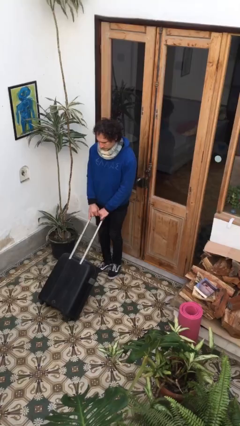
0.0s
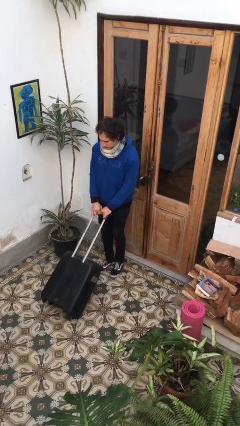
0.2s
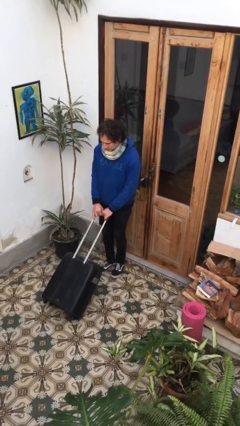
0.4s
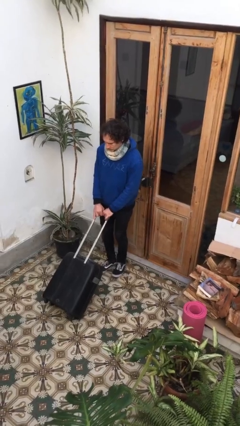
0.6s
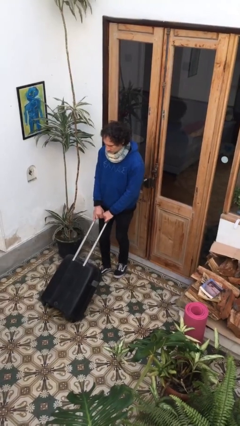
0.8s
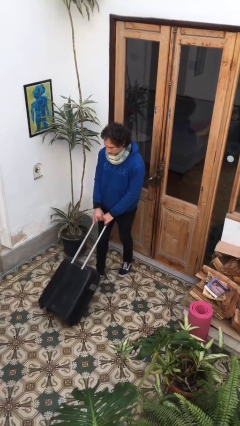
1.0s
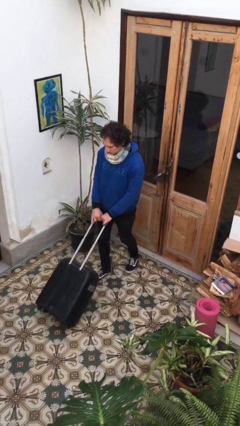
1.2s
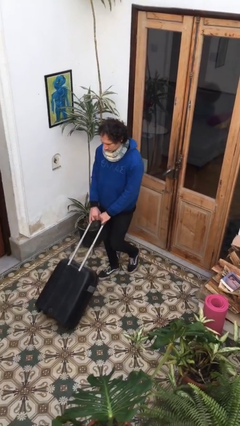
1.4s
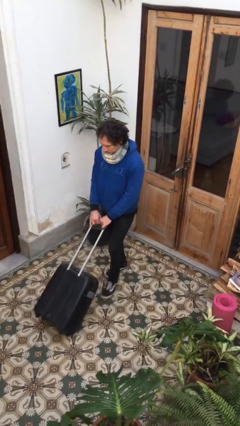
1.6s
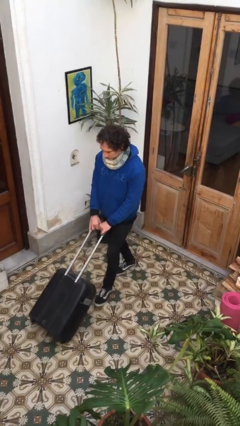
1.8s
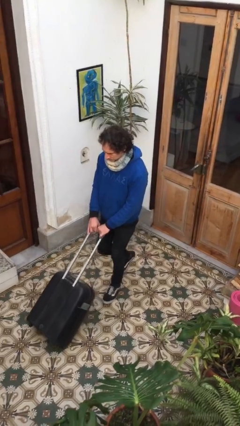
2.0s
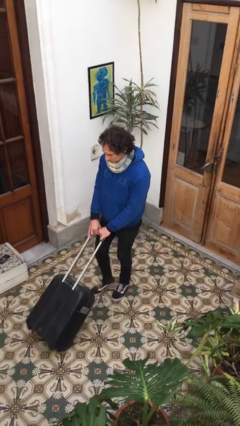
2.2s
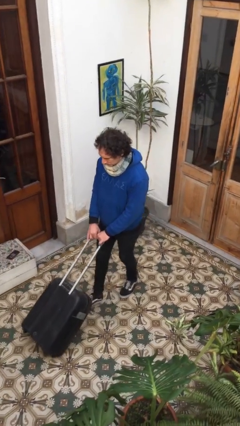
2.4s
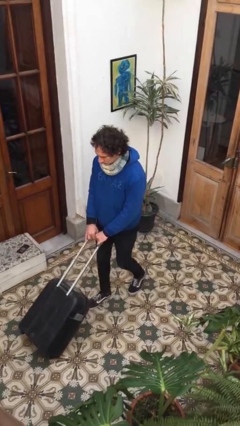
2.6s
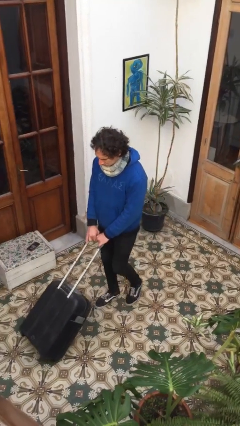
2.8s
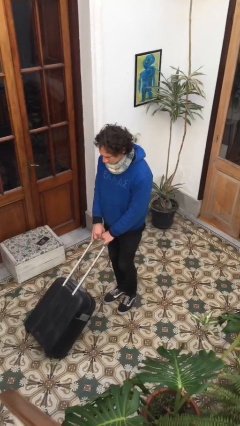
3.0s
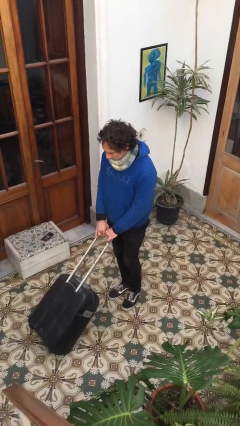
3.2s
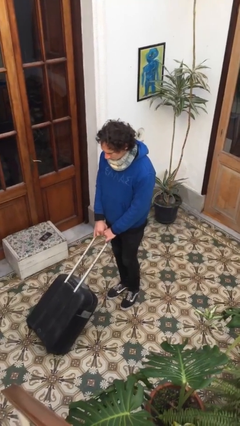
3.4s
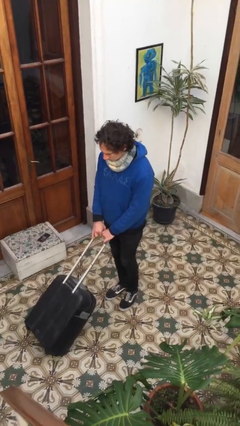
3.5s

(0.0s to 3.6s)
person pushes wheeled cart

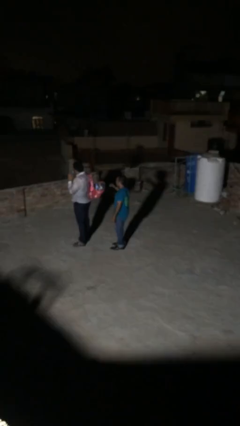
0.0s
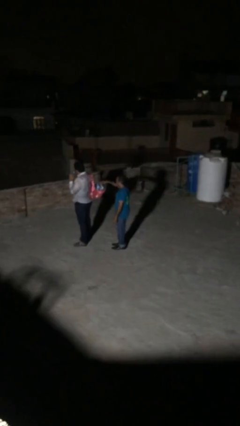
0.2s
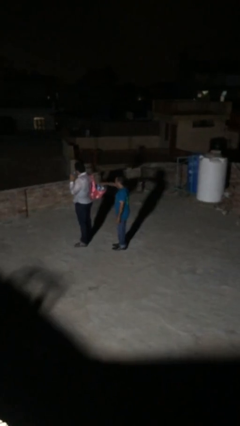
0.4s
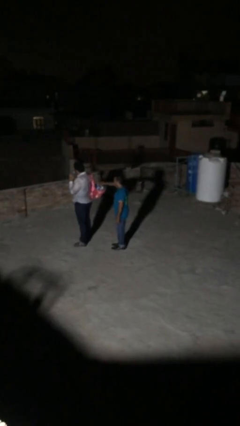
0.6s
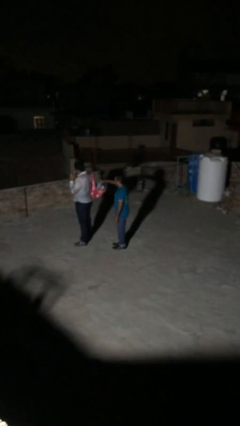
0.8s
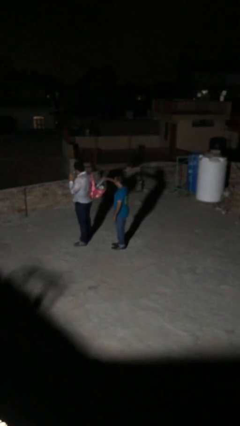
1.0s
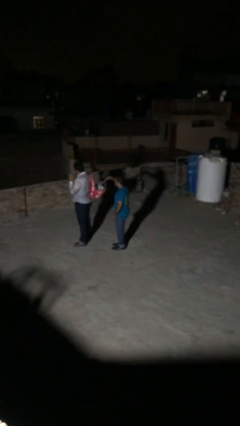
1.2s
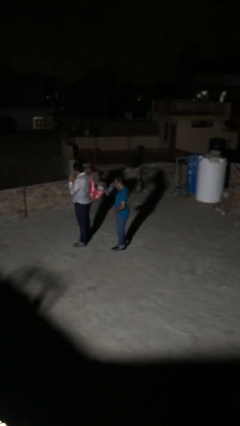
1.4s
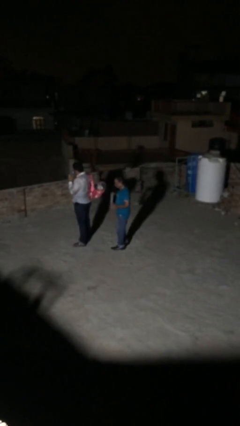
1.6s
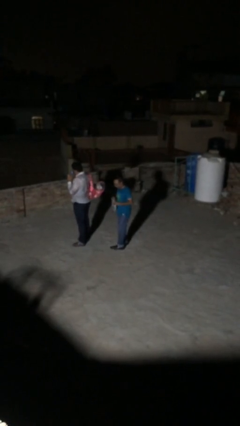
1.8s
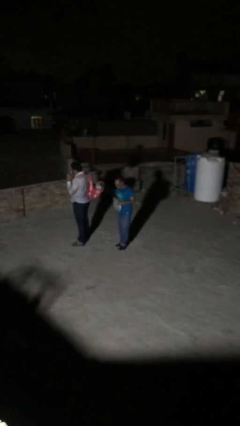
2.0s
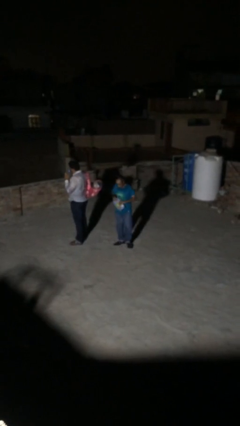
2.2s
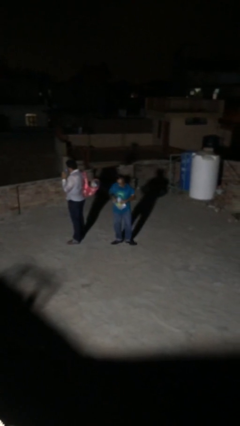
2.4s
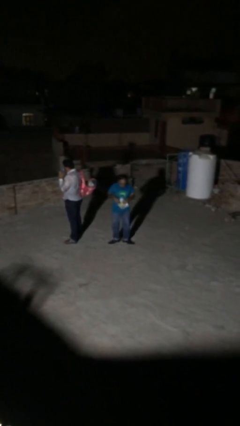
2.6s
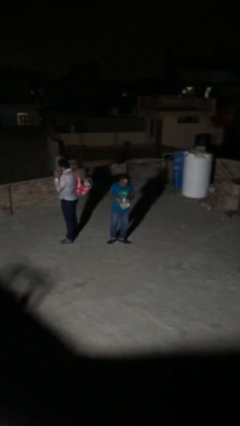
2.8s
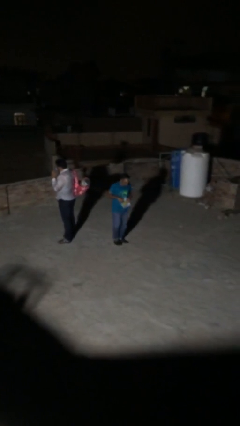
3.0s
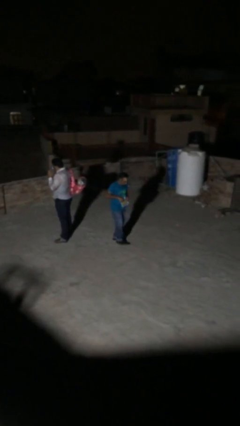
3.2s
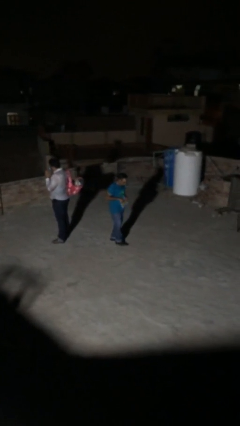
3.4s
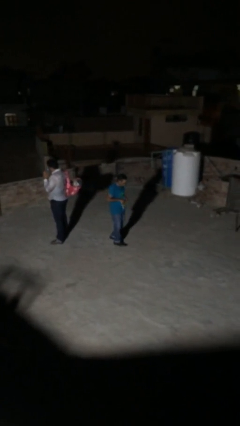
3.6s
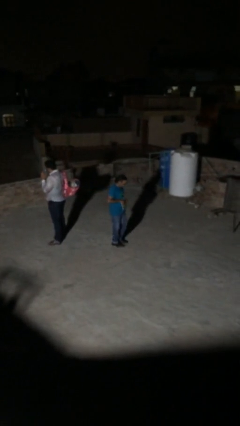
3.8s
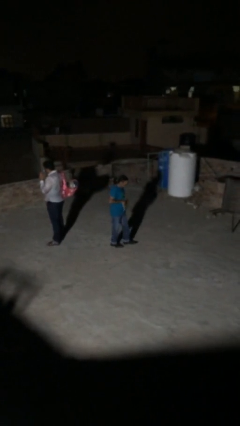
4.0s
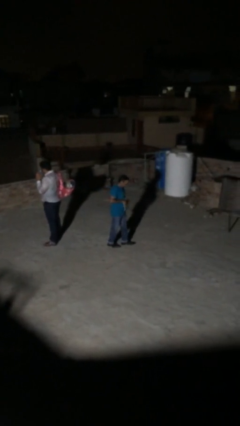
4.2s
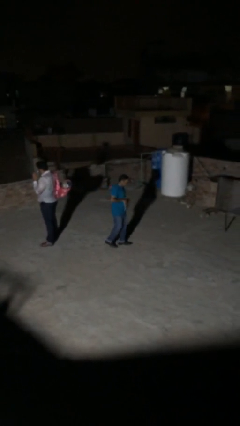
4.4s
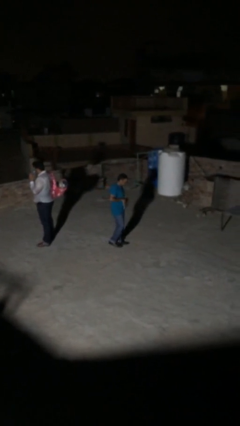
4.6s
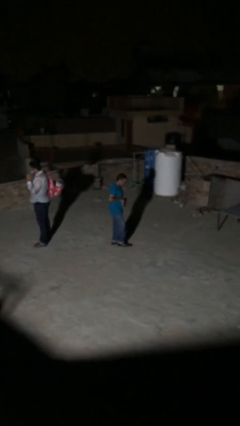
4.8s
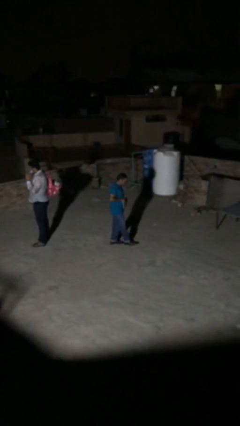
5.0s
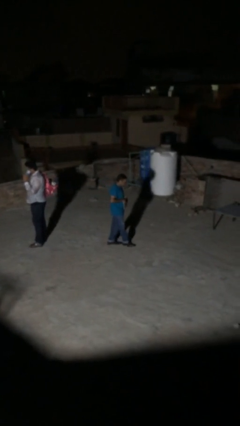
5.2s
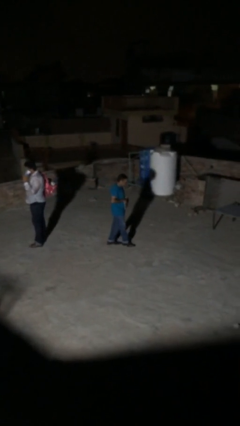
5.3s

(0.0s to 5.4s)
person steals object from person

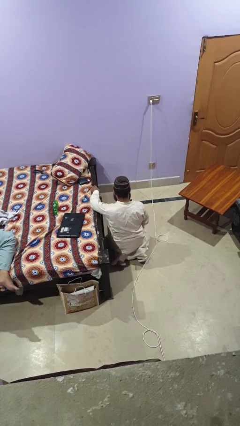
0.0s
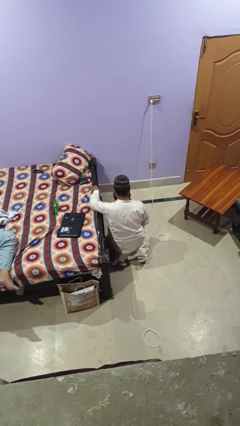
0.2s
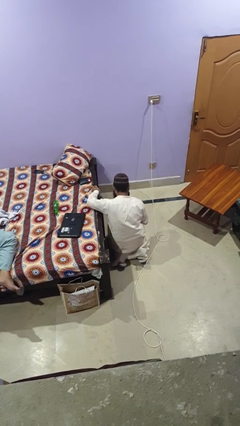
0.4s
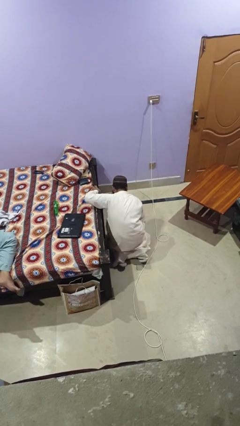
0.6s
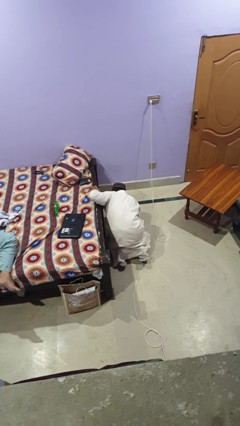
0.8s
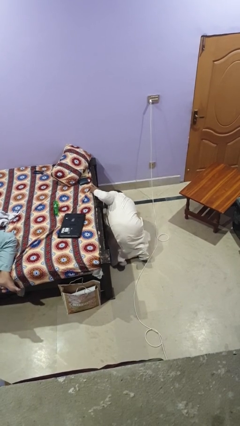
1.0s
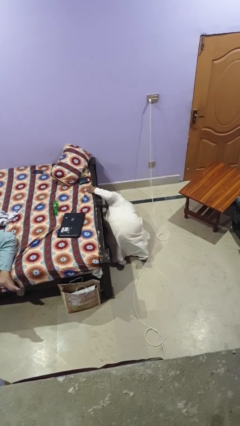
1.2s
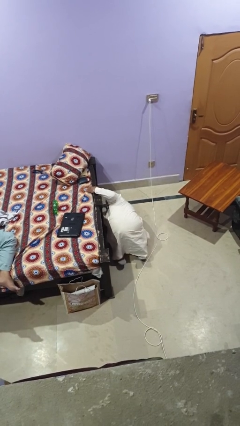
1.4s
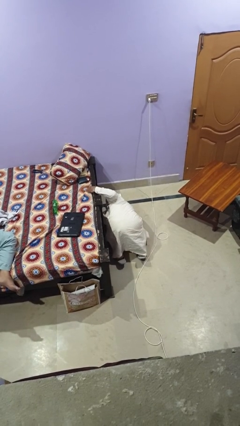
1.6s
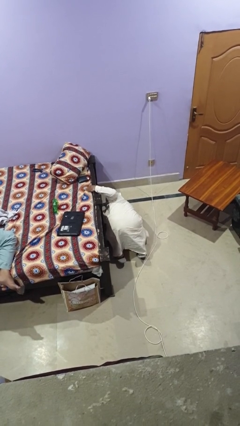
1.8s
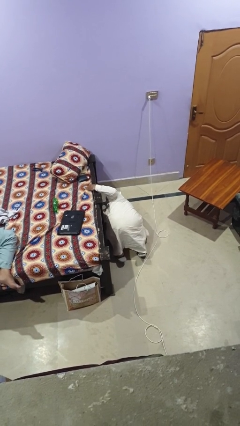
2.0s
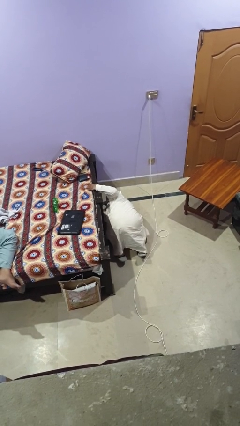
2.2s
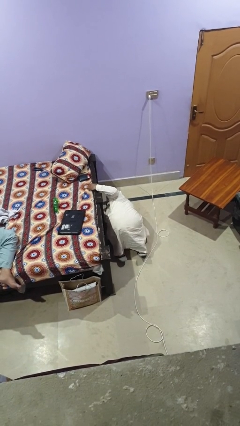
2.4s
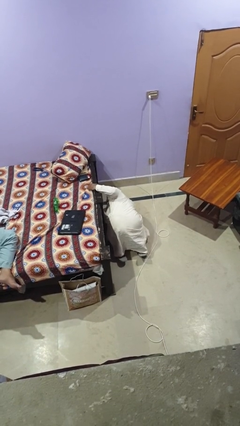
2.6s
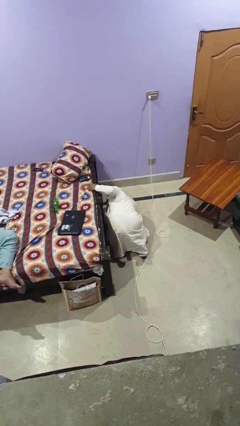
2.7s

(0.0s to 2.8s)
person searches under bed

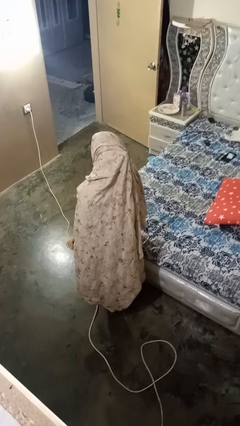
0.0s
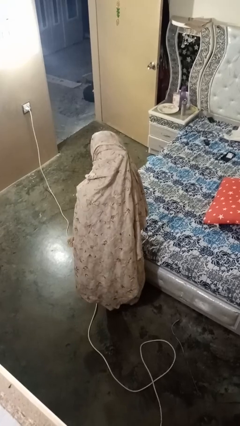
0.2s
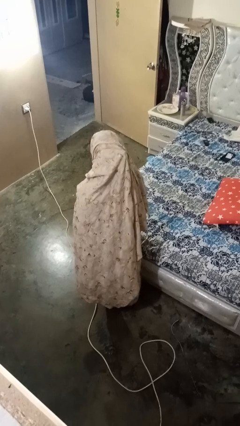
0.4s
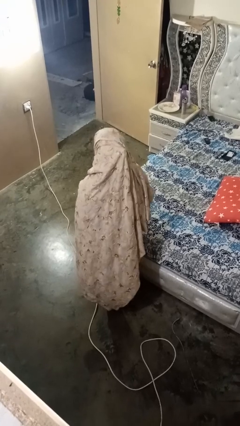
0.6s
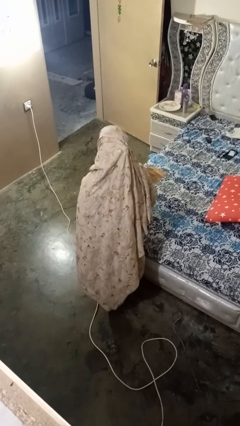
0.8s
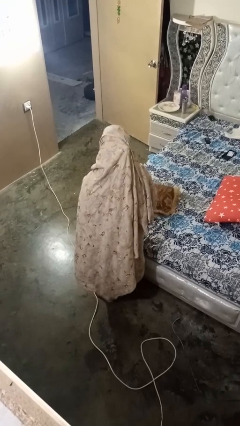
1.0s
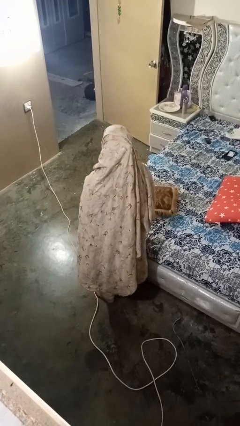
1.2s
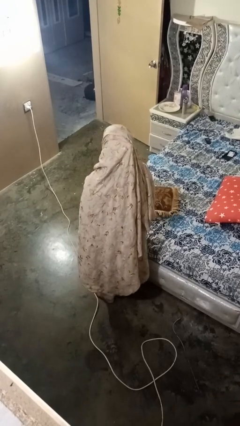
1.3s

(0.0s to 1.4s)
person puts down object on bed

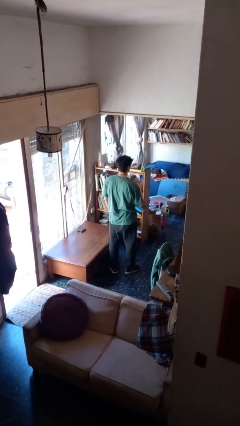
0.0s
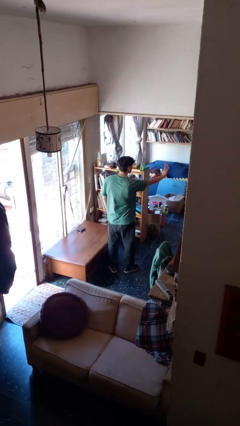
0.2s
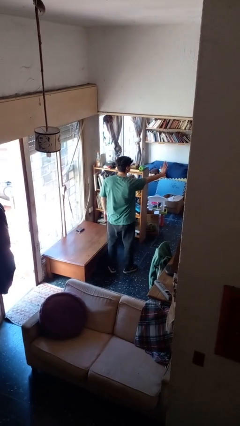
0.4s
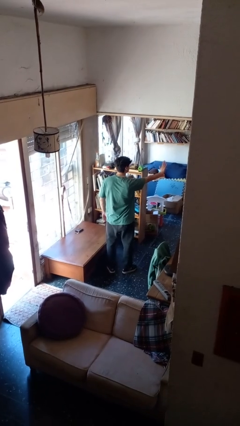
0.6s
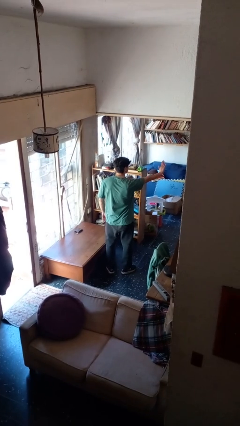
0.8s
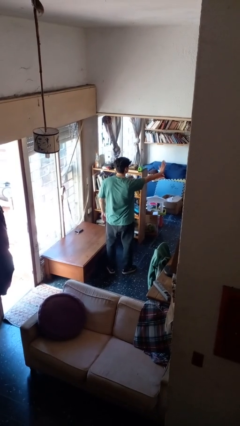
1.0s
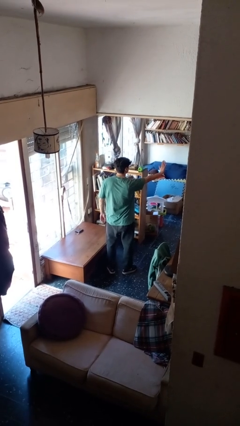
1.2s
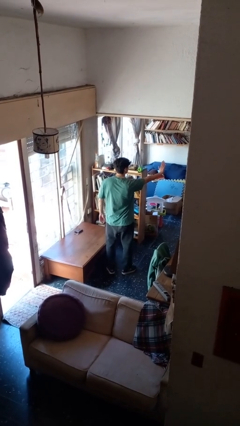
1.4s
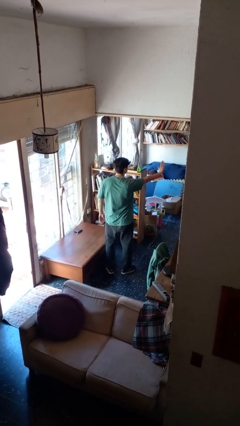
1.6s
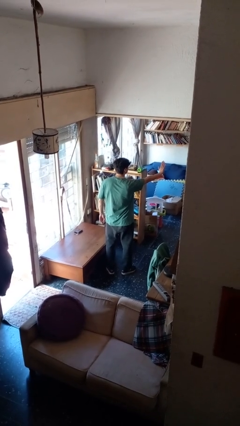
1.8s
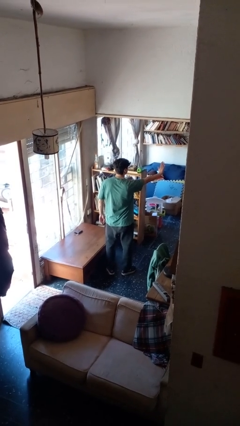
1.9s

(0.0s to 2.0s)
person gestures stop

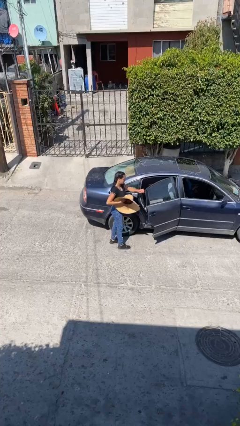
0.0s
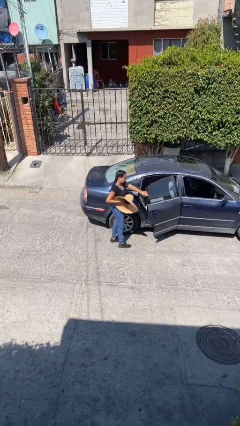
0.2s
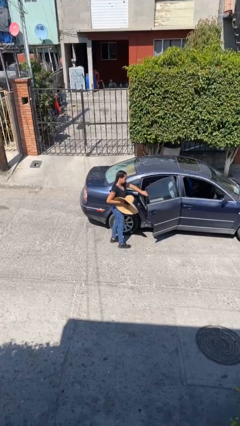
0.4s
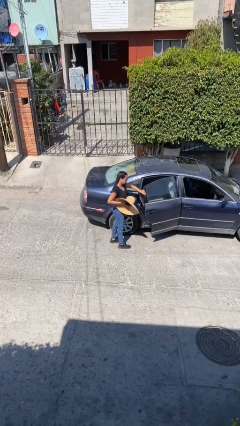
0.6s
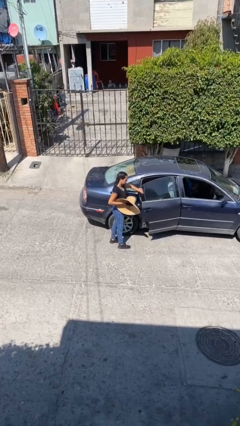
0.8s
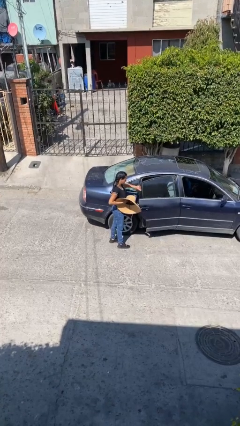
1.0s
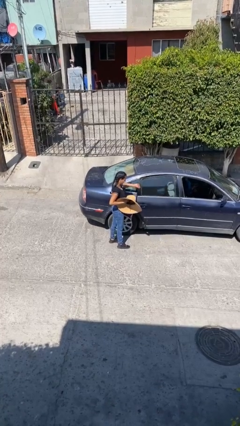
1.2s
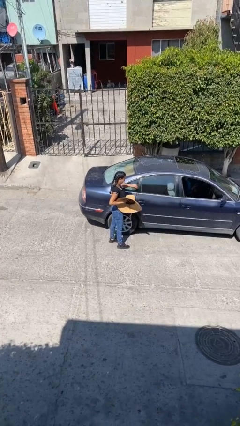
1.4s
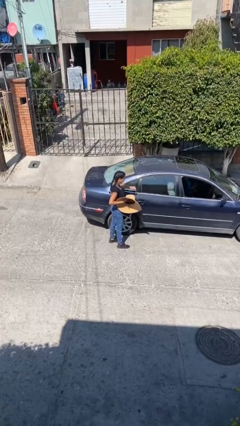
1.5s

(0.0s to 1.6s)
person closes car door

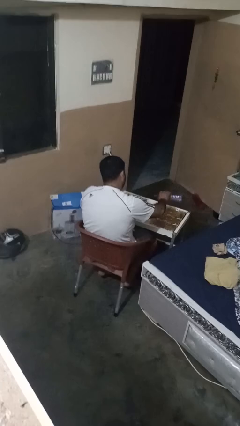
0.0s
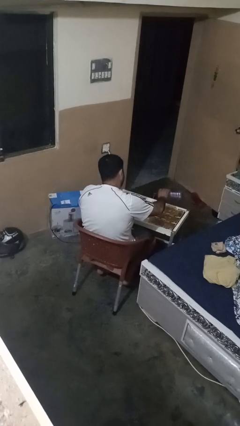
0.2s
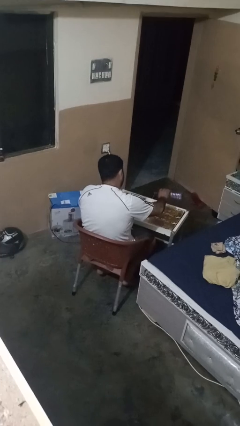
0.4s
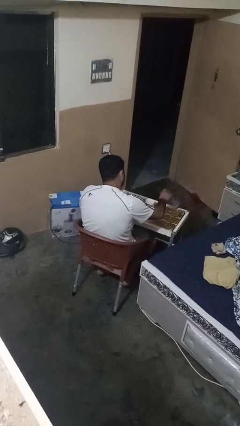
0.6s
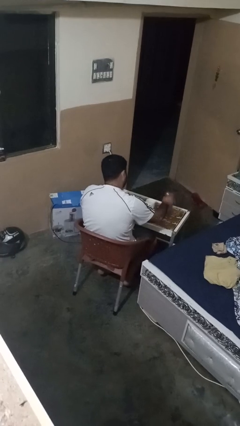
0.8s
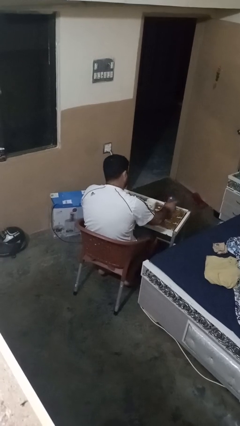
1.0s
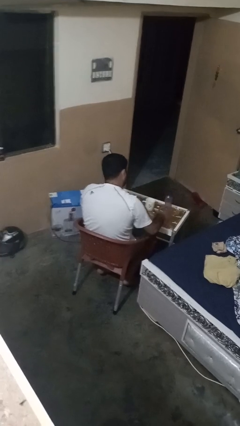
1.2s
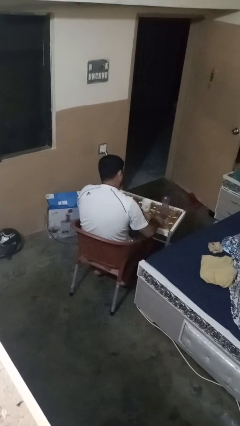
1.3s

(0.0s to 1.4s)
person screws lid to bottle
